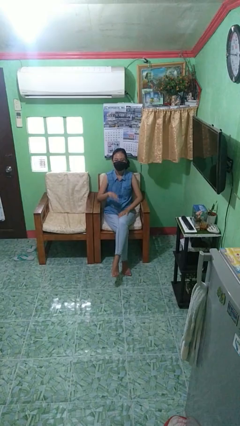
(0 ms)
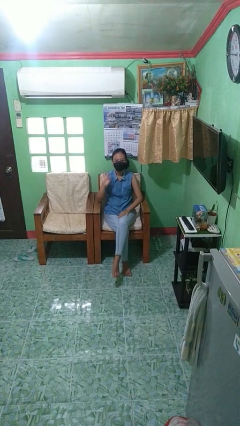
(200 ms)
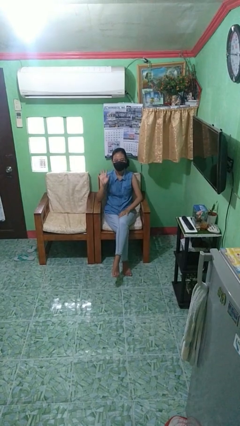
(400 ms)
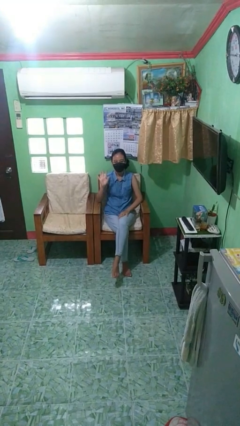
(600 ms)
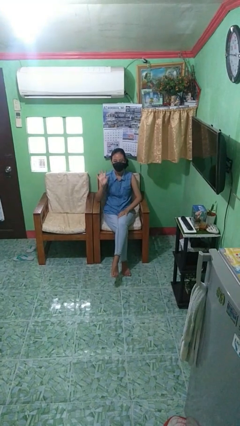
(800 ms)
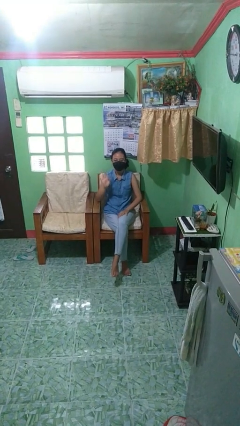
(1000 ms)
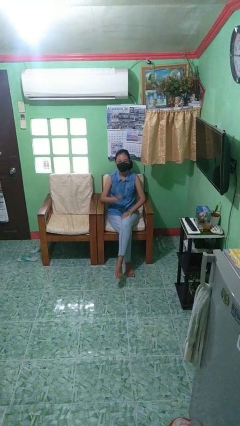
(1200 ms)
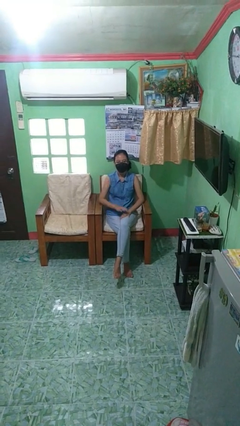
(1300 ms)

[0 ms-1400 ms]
person gestures number five

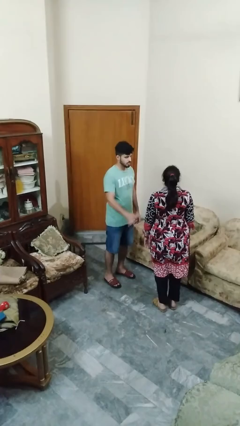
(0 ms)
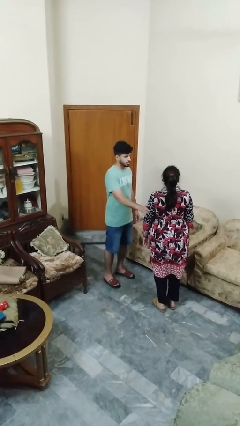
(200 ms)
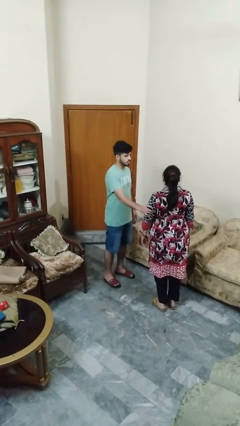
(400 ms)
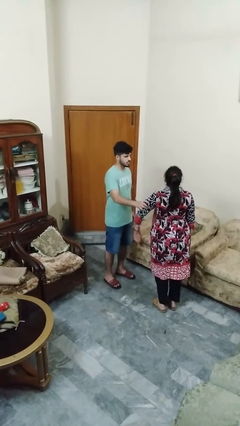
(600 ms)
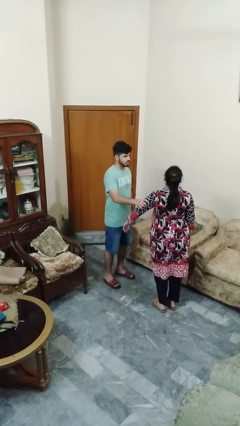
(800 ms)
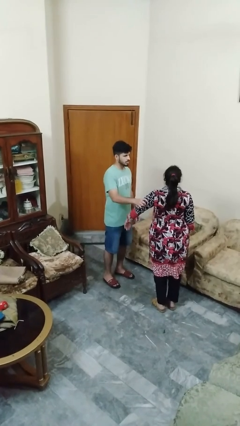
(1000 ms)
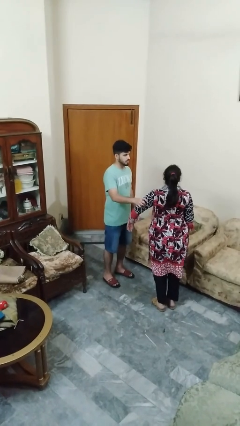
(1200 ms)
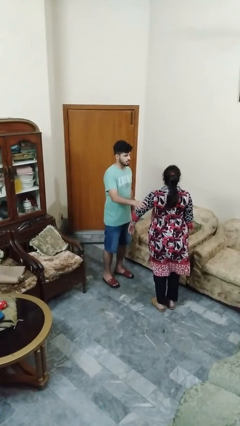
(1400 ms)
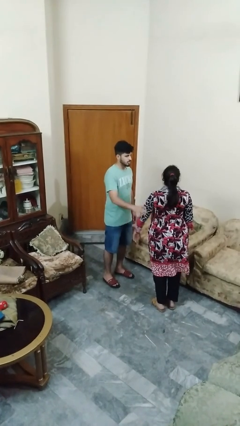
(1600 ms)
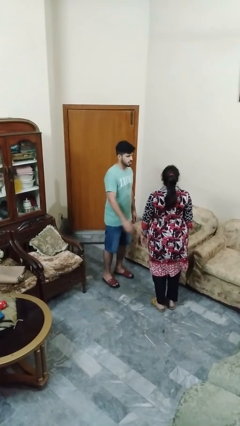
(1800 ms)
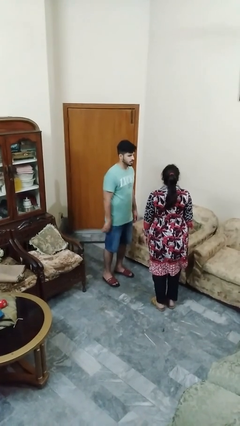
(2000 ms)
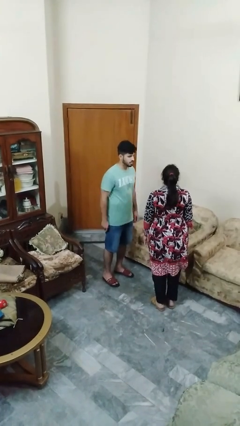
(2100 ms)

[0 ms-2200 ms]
person grabs person by bicep

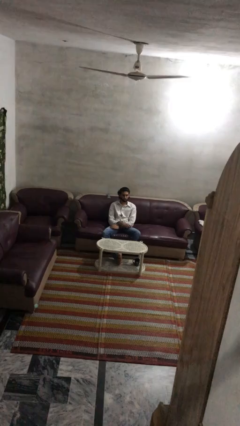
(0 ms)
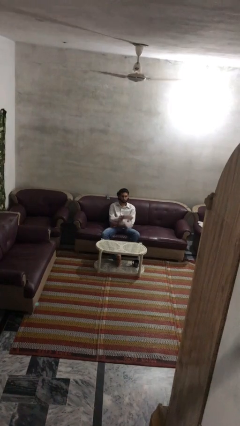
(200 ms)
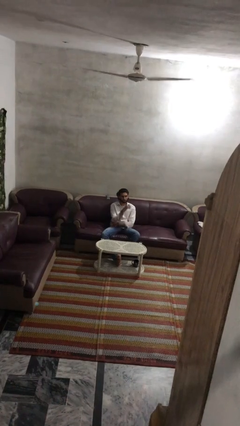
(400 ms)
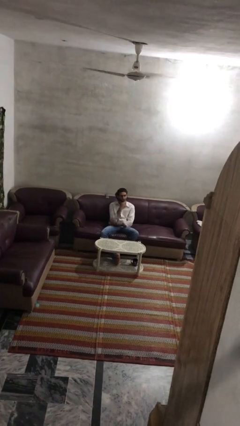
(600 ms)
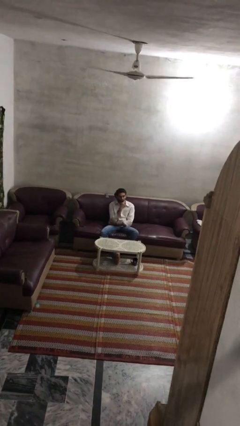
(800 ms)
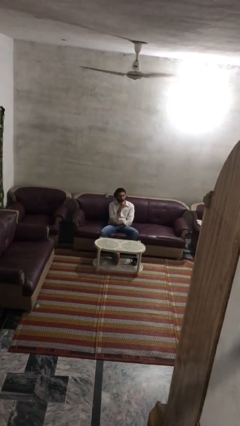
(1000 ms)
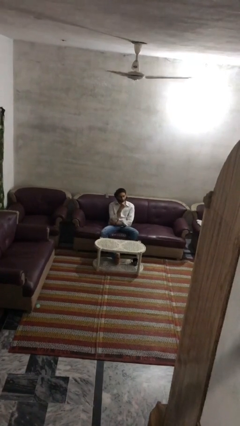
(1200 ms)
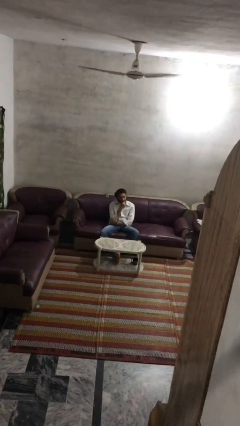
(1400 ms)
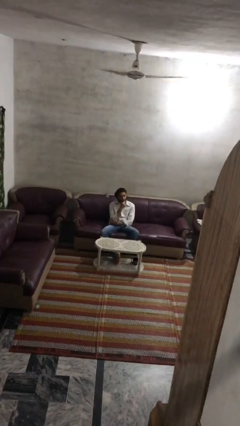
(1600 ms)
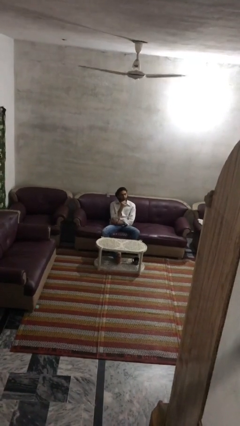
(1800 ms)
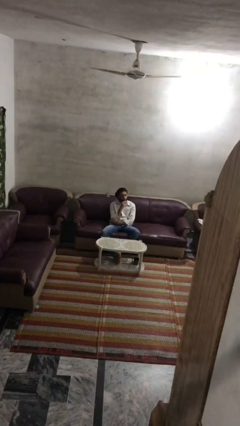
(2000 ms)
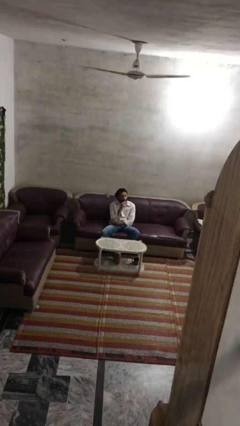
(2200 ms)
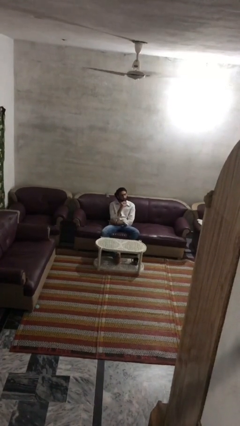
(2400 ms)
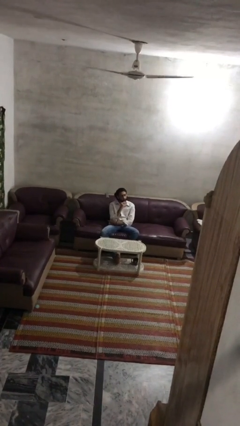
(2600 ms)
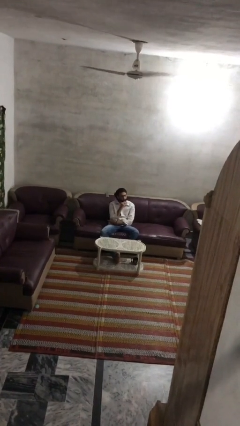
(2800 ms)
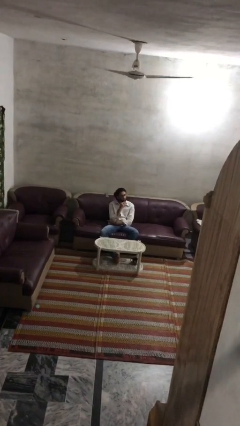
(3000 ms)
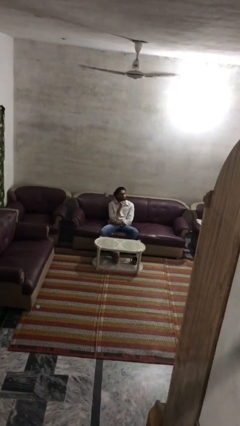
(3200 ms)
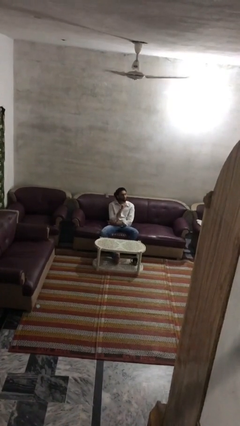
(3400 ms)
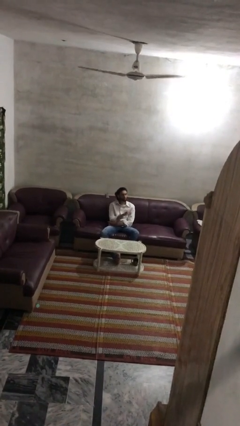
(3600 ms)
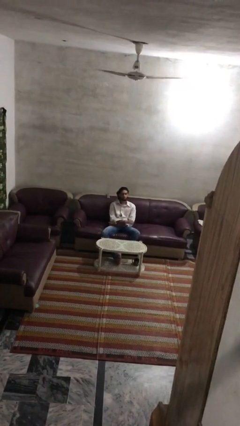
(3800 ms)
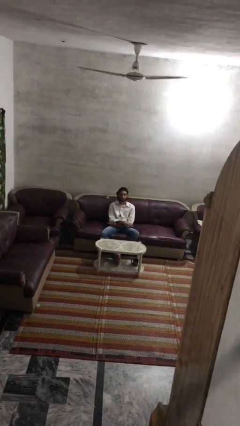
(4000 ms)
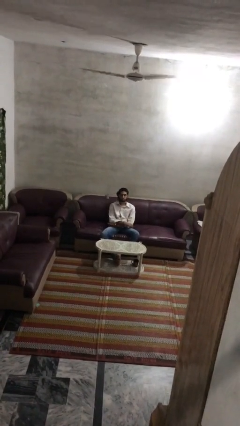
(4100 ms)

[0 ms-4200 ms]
person strokes chin

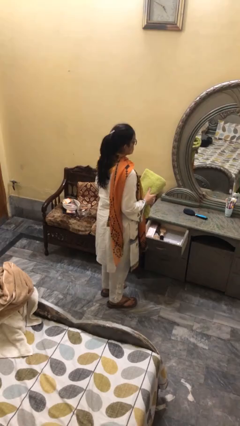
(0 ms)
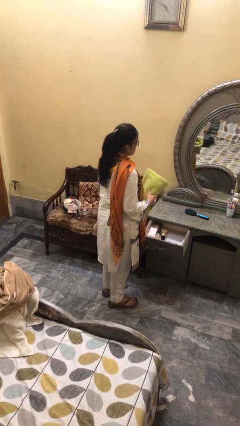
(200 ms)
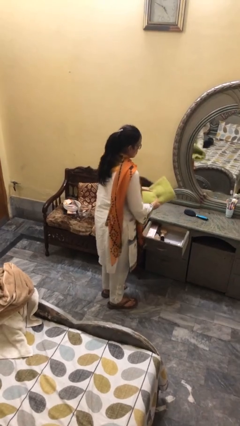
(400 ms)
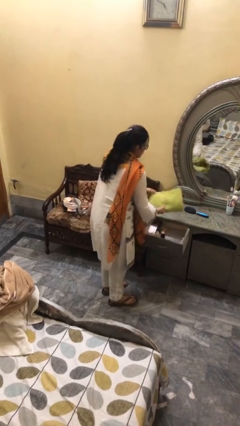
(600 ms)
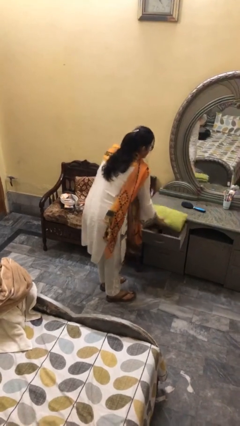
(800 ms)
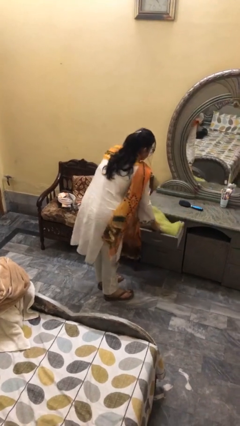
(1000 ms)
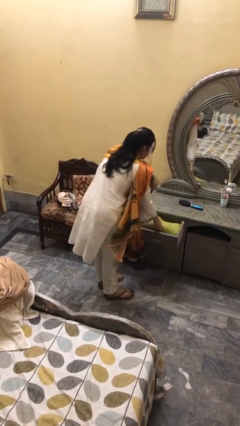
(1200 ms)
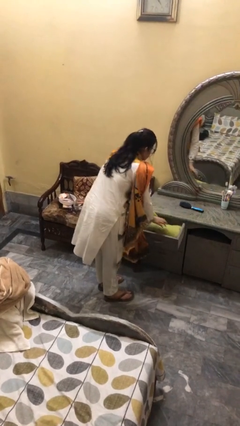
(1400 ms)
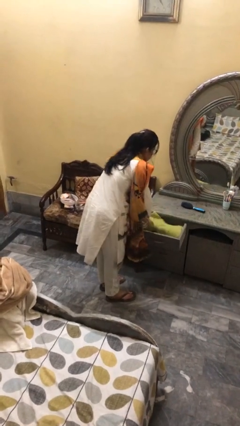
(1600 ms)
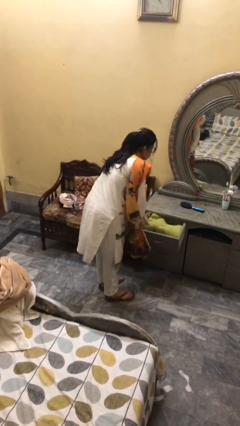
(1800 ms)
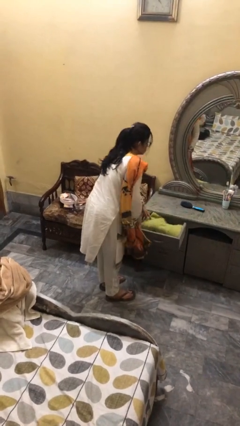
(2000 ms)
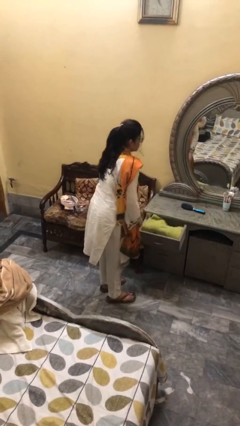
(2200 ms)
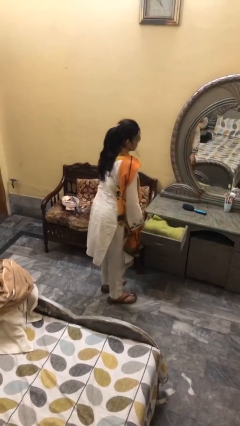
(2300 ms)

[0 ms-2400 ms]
person puts clothes into dresser

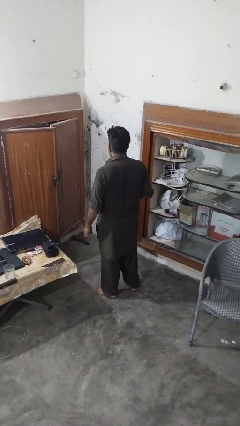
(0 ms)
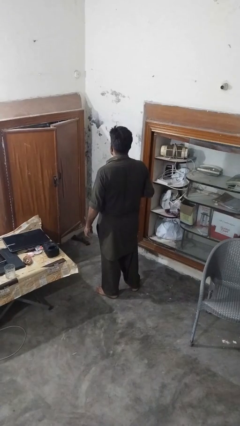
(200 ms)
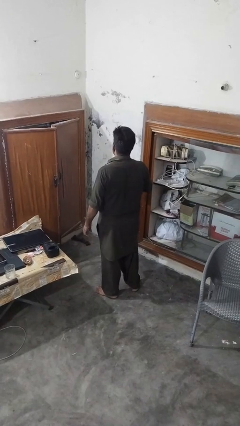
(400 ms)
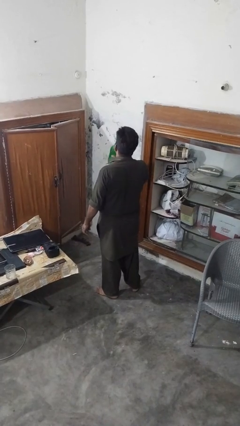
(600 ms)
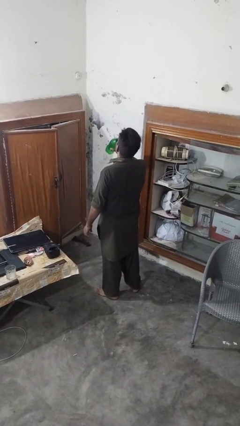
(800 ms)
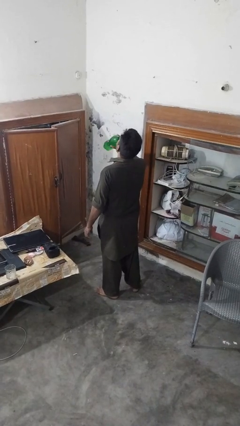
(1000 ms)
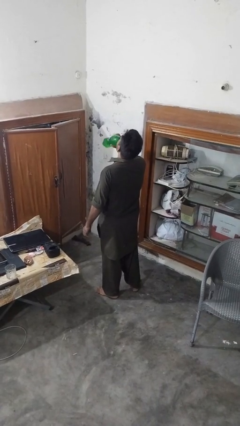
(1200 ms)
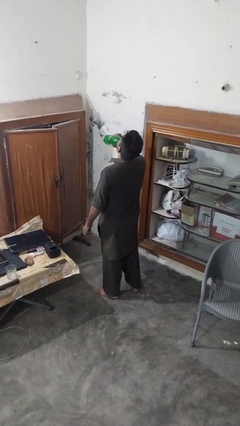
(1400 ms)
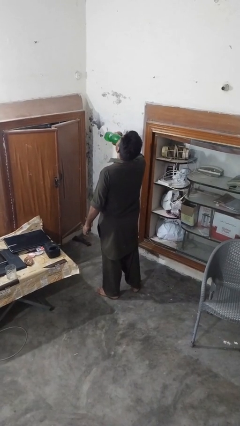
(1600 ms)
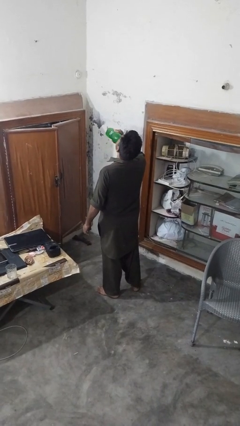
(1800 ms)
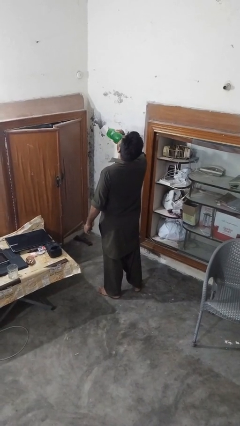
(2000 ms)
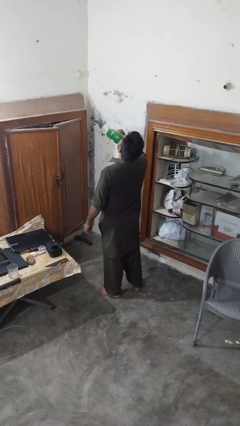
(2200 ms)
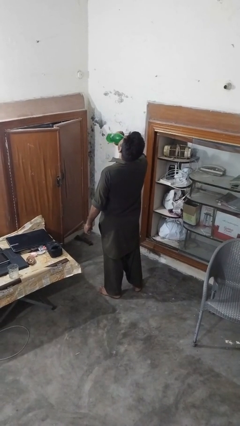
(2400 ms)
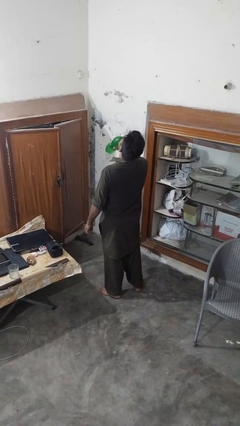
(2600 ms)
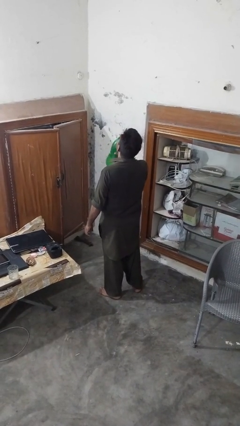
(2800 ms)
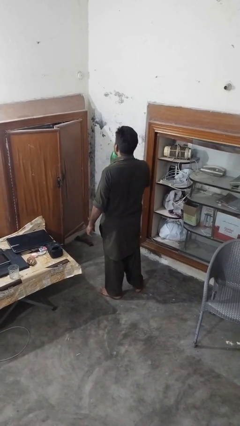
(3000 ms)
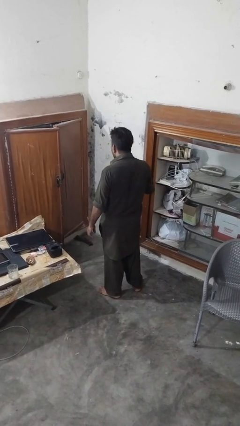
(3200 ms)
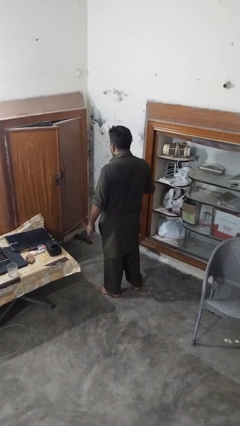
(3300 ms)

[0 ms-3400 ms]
person drinks from bottle

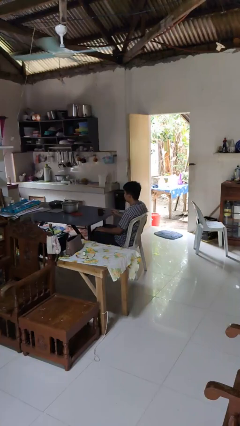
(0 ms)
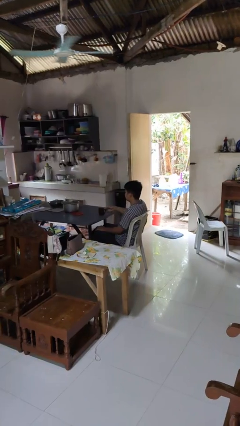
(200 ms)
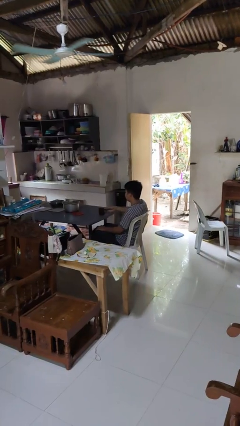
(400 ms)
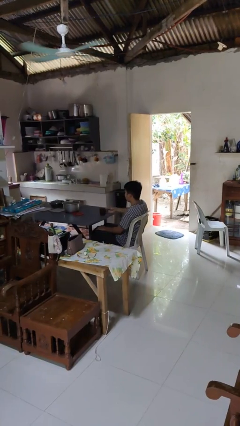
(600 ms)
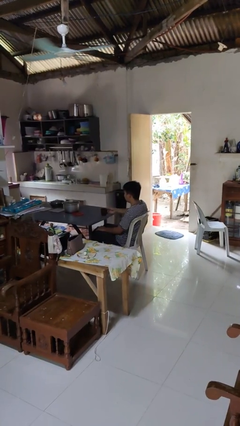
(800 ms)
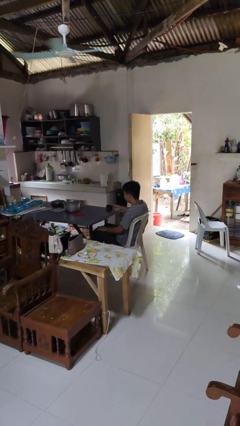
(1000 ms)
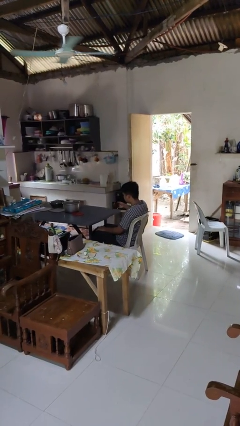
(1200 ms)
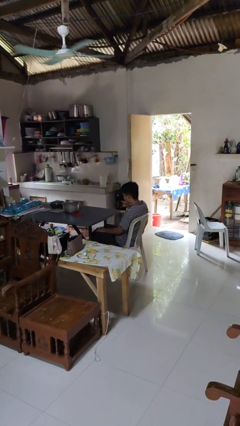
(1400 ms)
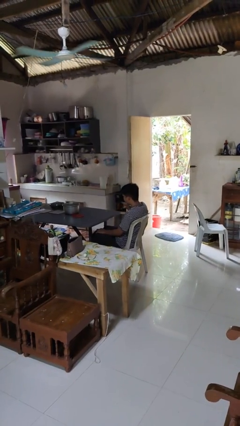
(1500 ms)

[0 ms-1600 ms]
person picks up object from table

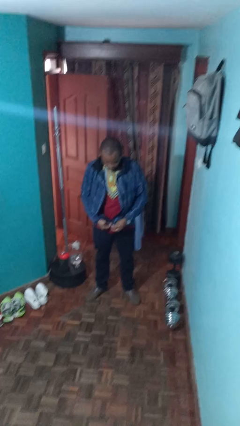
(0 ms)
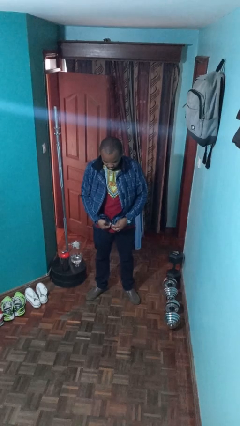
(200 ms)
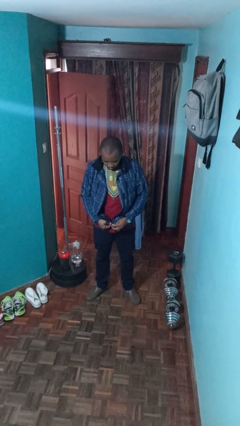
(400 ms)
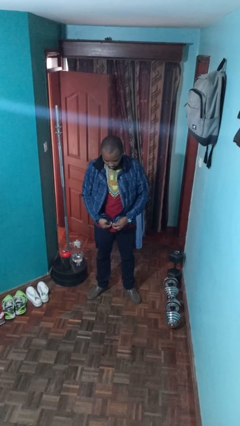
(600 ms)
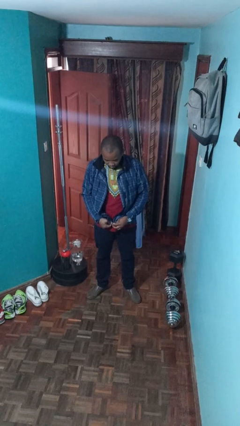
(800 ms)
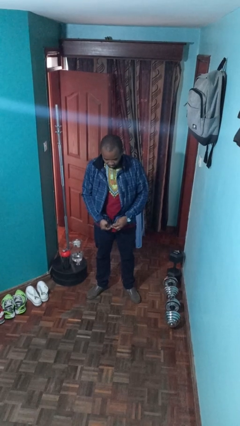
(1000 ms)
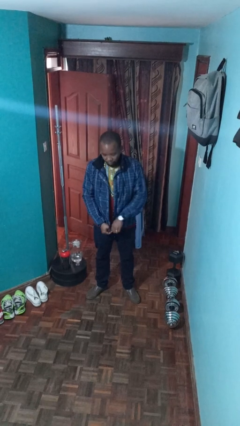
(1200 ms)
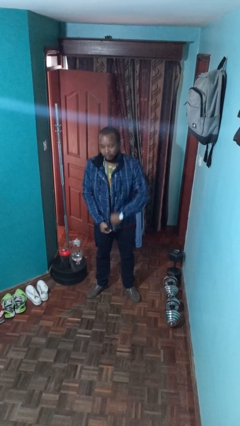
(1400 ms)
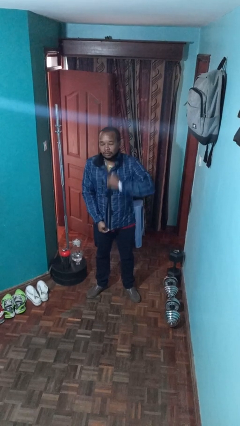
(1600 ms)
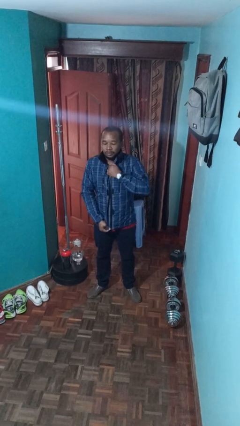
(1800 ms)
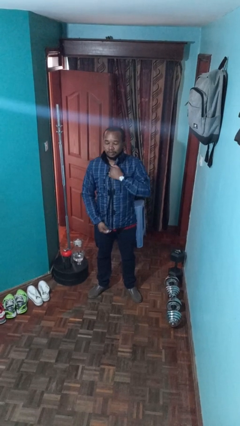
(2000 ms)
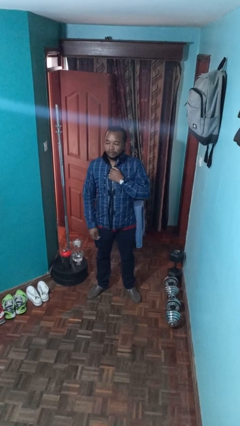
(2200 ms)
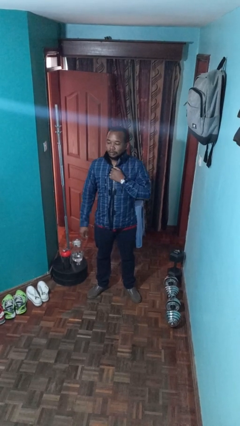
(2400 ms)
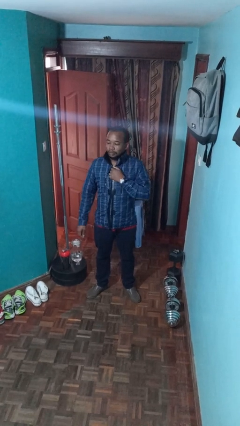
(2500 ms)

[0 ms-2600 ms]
person zips up jacket
